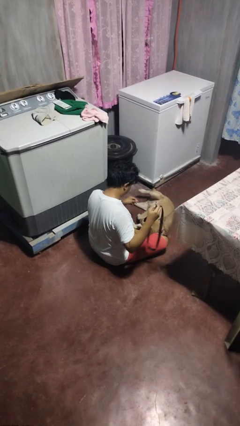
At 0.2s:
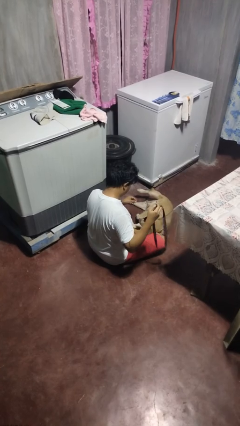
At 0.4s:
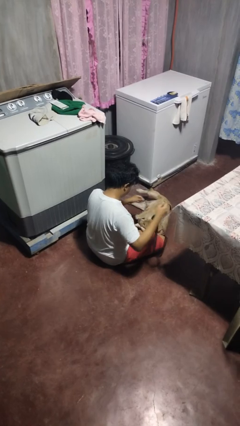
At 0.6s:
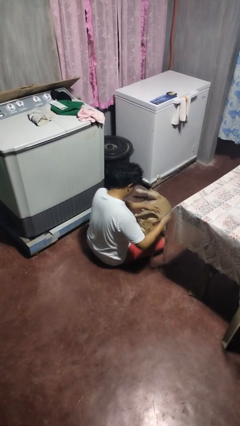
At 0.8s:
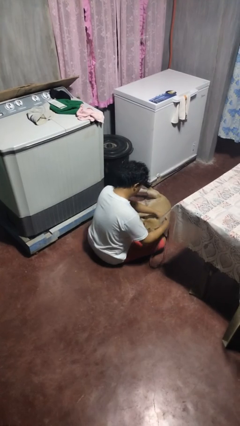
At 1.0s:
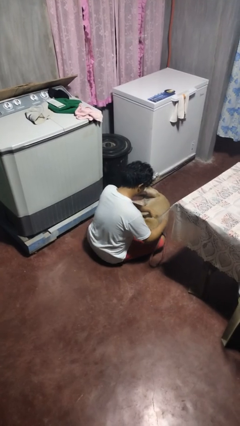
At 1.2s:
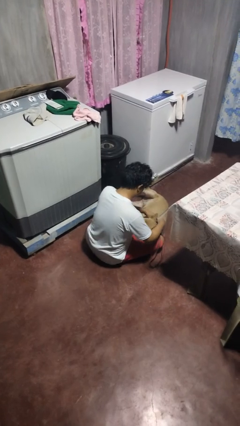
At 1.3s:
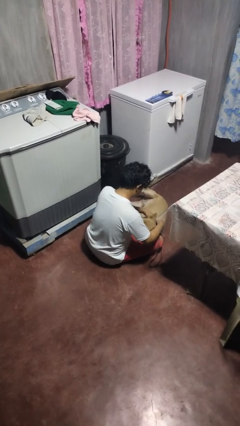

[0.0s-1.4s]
person attaches leash to dog

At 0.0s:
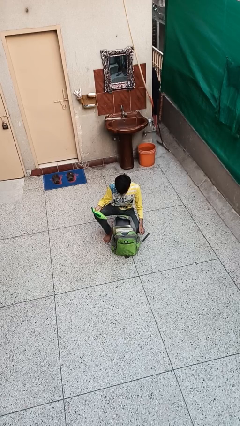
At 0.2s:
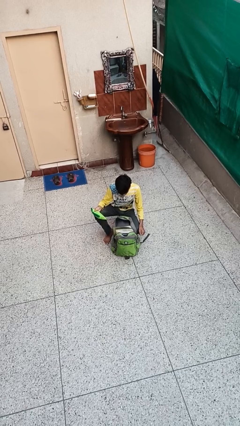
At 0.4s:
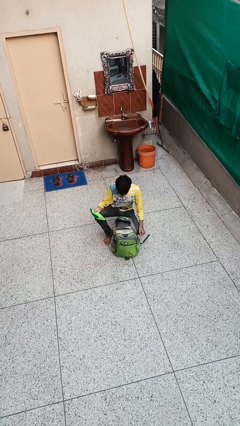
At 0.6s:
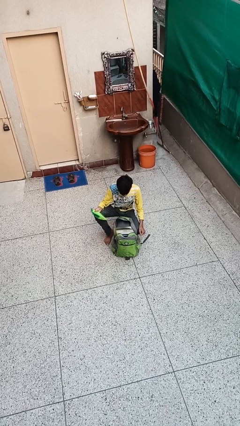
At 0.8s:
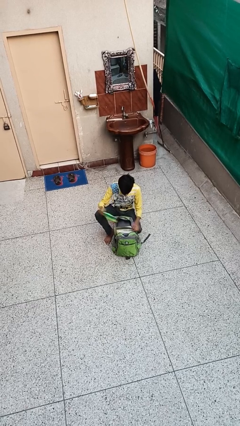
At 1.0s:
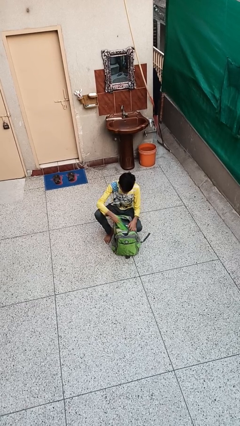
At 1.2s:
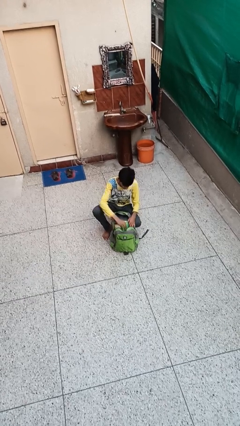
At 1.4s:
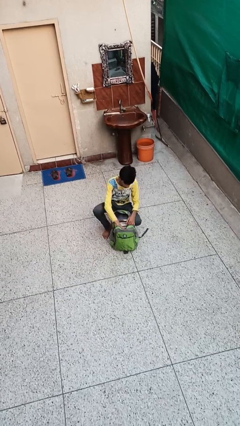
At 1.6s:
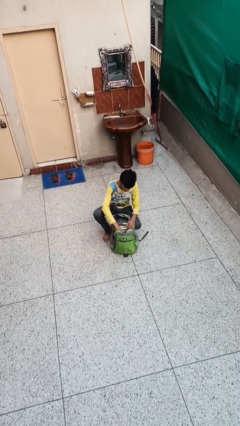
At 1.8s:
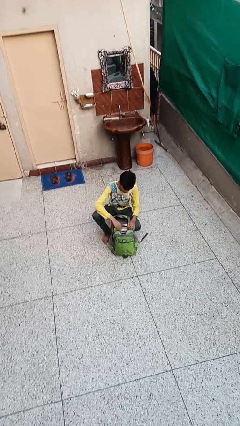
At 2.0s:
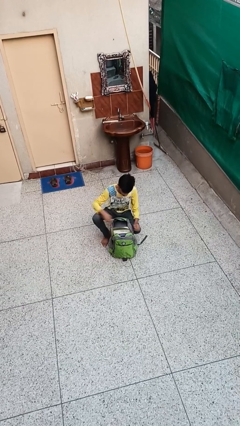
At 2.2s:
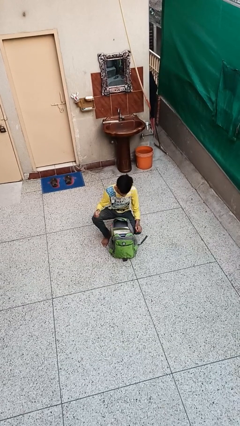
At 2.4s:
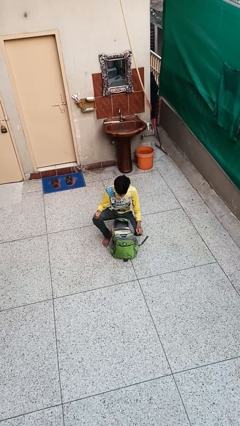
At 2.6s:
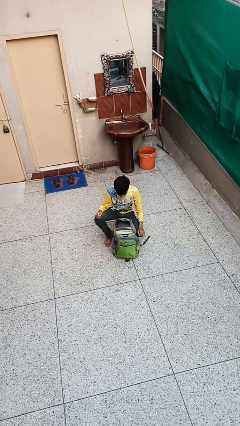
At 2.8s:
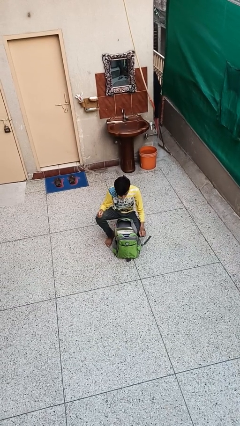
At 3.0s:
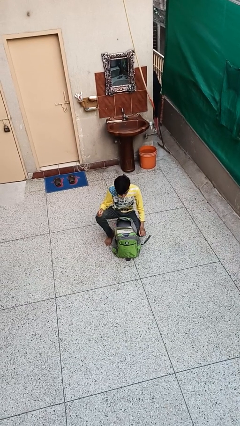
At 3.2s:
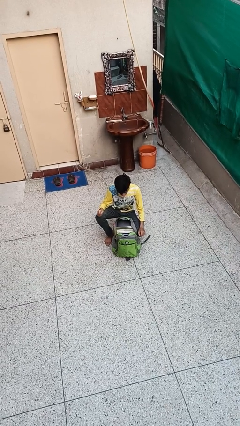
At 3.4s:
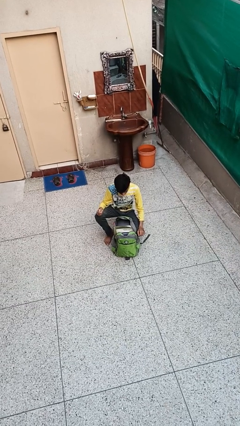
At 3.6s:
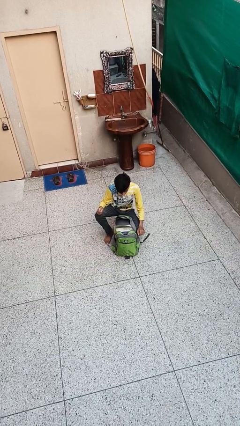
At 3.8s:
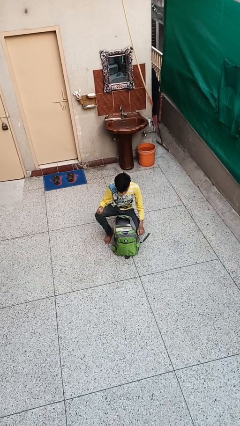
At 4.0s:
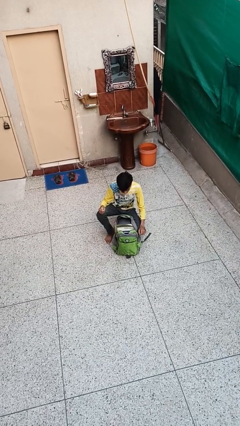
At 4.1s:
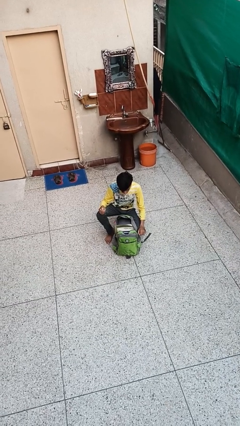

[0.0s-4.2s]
person puts object into backpack

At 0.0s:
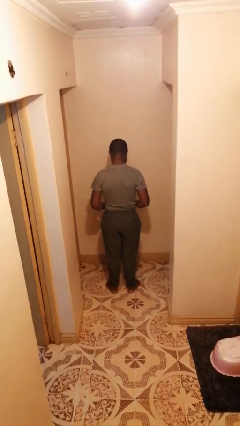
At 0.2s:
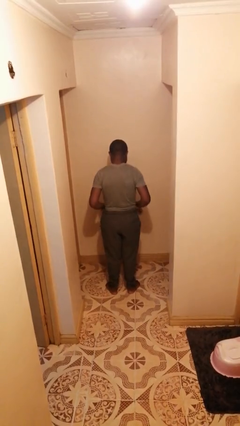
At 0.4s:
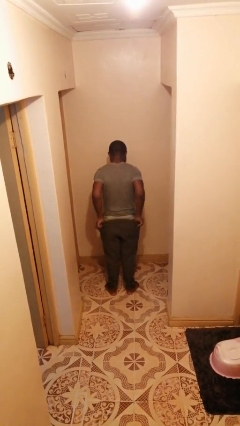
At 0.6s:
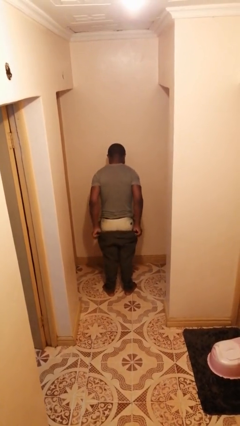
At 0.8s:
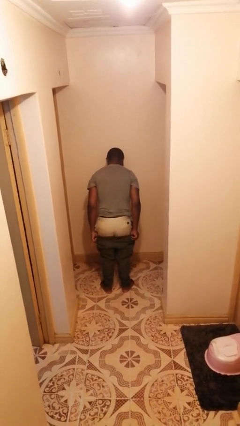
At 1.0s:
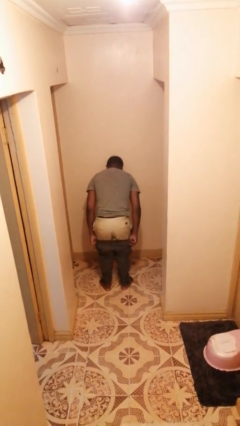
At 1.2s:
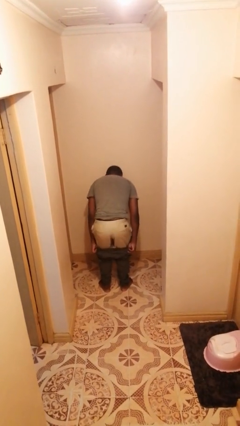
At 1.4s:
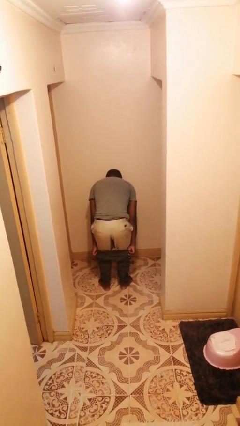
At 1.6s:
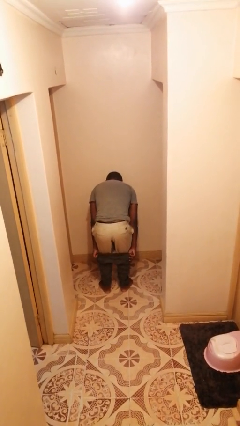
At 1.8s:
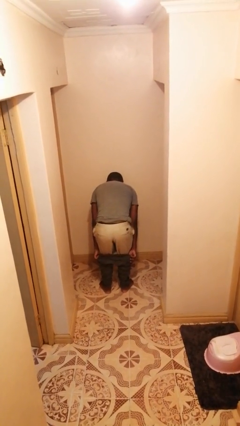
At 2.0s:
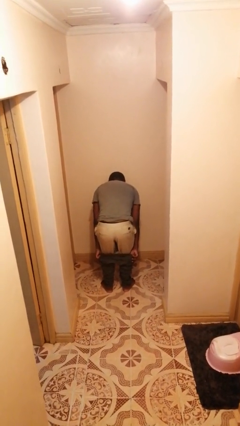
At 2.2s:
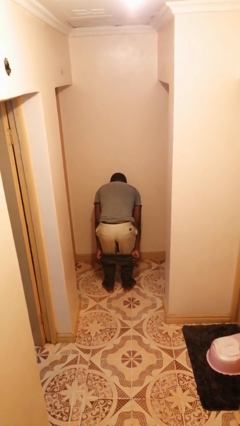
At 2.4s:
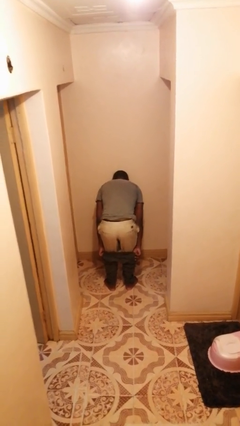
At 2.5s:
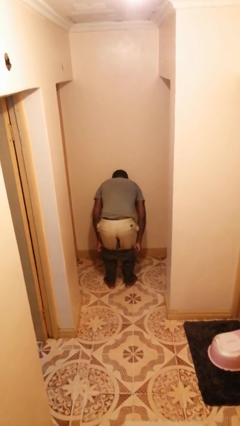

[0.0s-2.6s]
person takes off pants

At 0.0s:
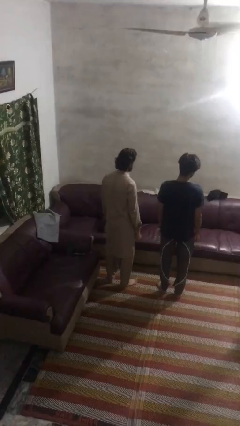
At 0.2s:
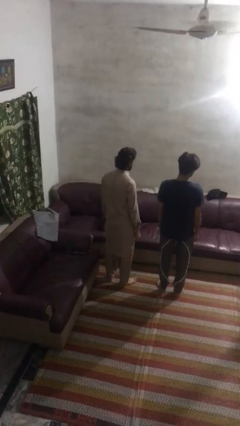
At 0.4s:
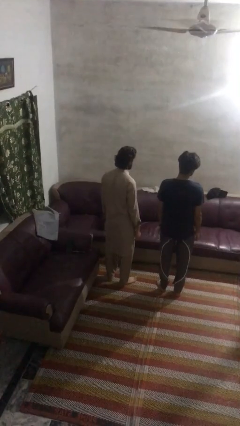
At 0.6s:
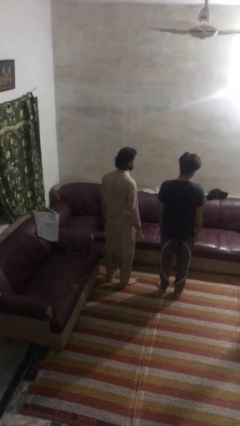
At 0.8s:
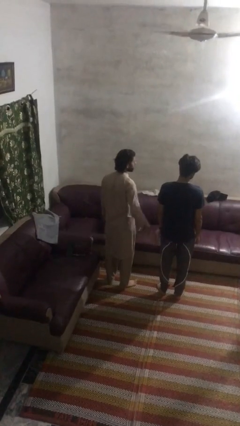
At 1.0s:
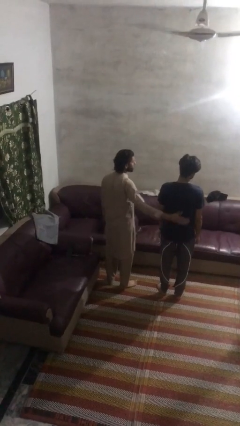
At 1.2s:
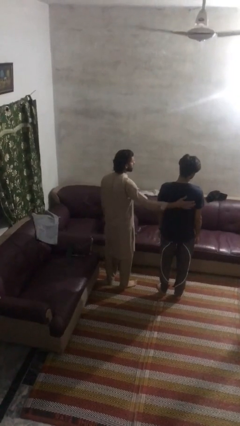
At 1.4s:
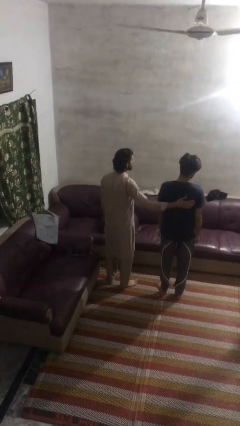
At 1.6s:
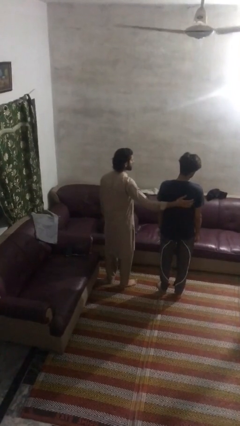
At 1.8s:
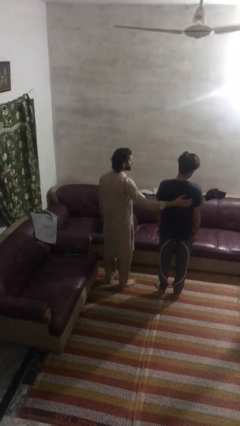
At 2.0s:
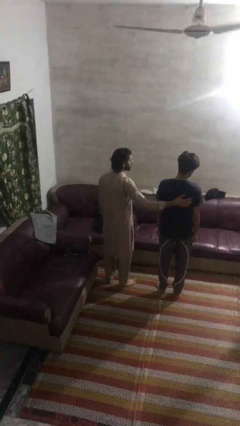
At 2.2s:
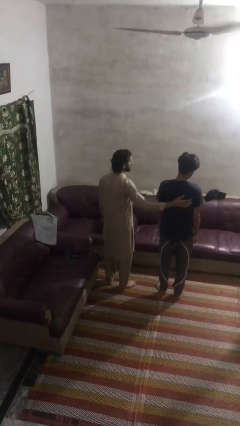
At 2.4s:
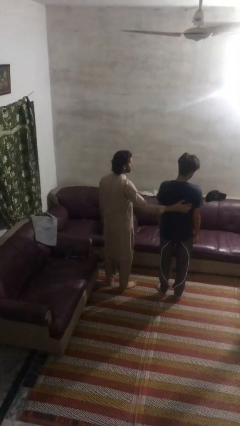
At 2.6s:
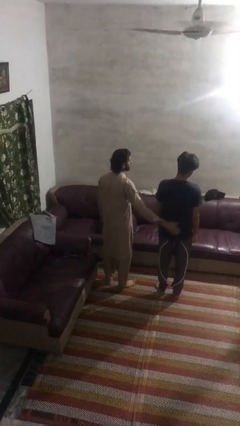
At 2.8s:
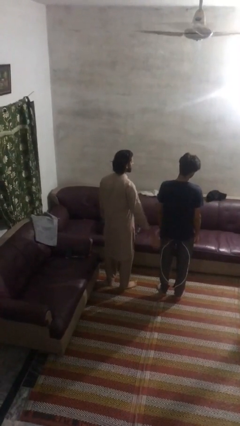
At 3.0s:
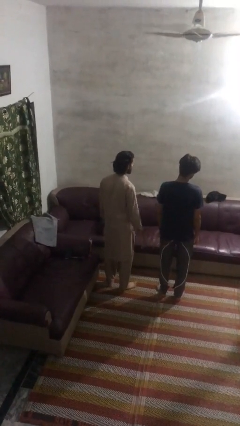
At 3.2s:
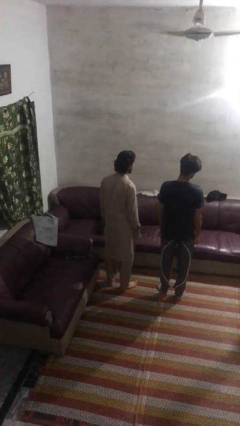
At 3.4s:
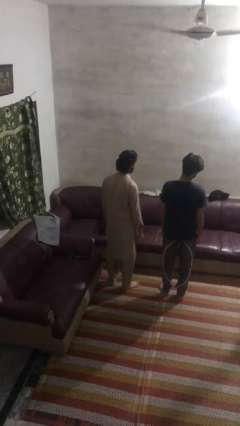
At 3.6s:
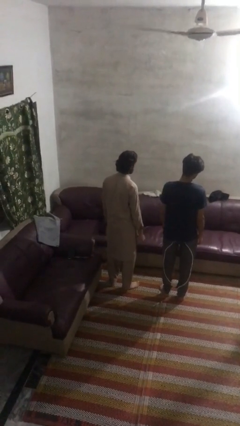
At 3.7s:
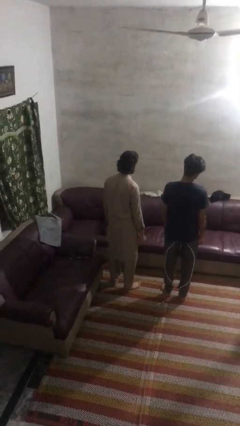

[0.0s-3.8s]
person touches back of person

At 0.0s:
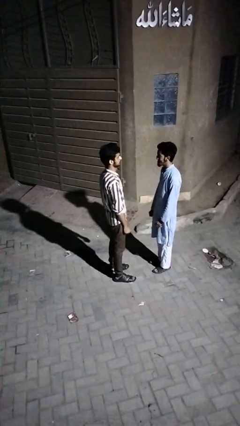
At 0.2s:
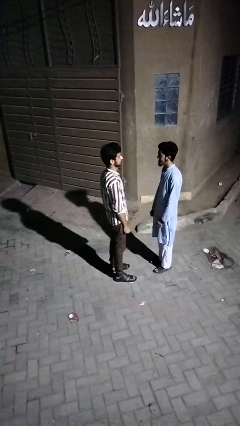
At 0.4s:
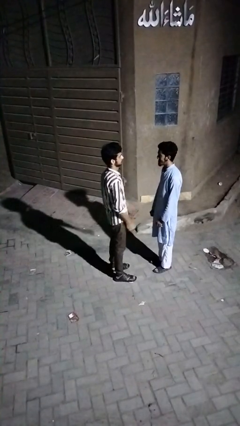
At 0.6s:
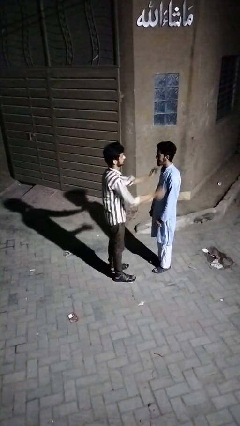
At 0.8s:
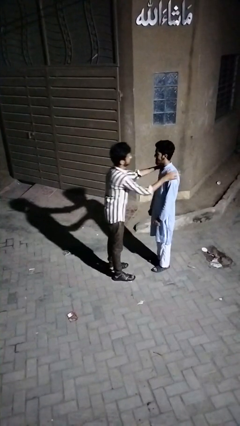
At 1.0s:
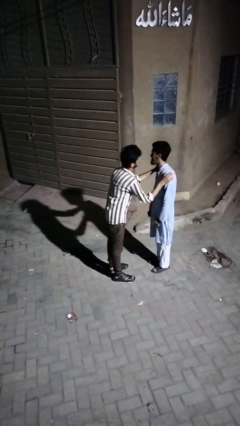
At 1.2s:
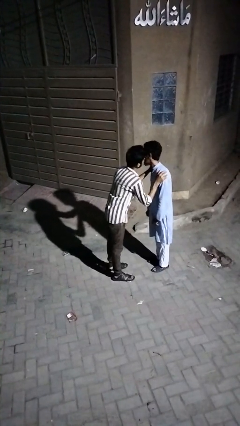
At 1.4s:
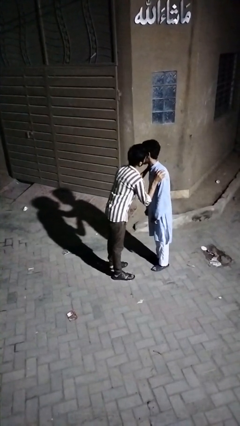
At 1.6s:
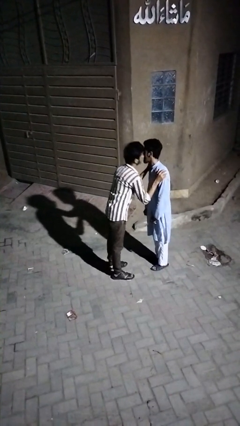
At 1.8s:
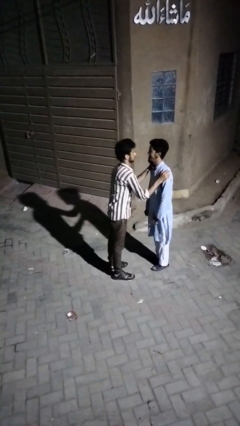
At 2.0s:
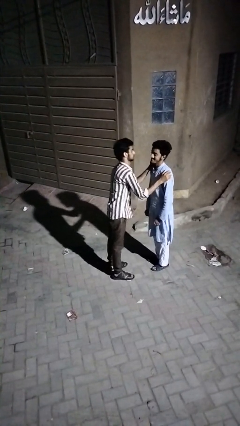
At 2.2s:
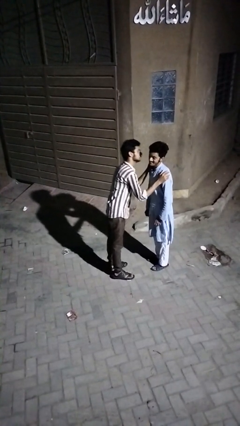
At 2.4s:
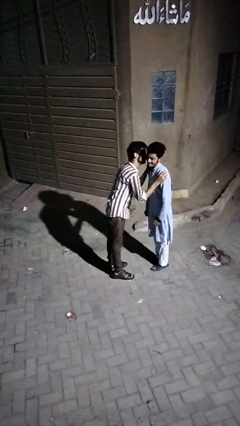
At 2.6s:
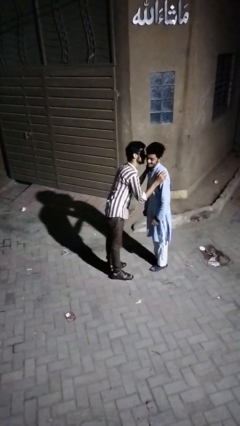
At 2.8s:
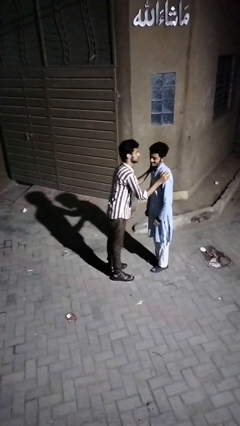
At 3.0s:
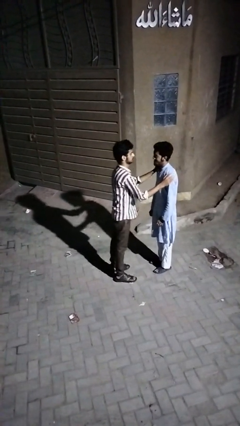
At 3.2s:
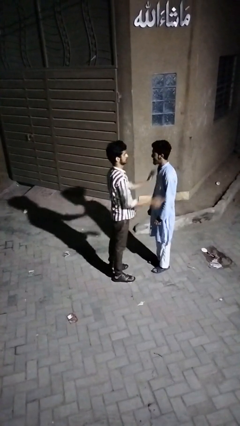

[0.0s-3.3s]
person kisses cheek of person

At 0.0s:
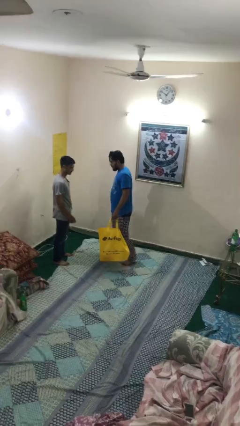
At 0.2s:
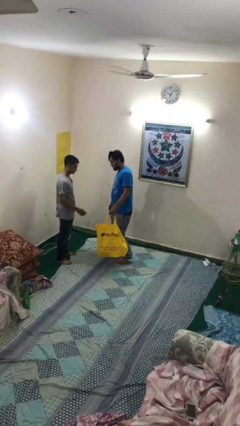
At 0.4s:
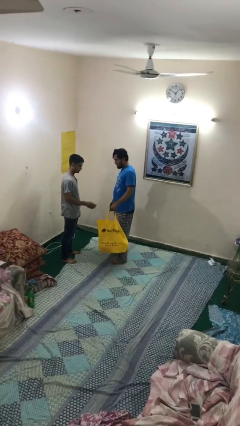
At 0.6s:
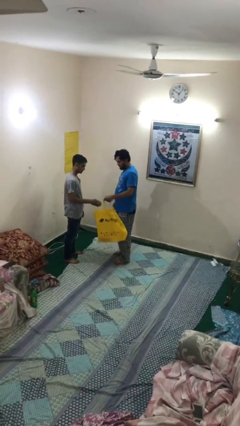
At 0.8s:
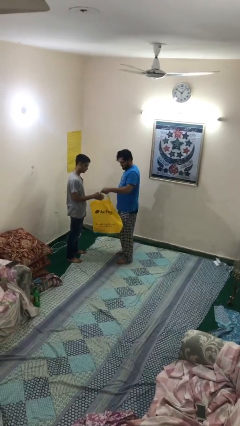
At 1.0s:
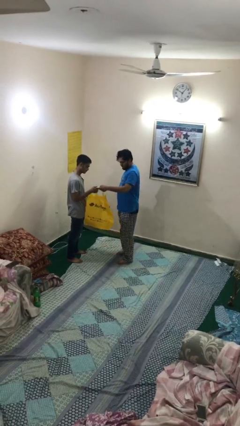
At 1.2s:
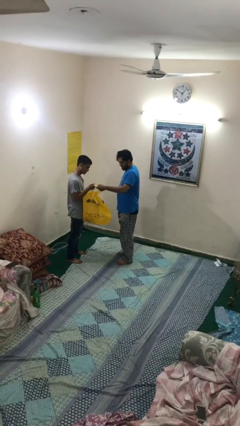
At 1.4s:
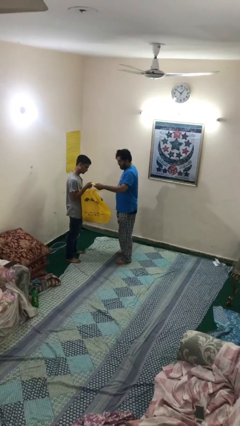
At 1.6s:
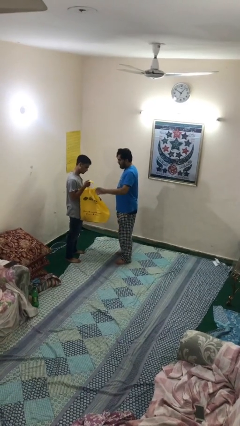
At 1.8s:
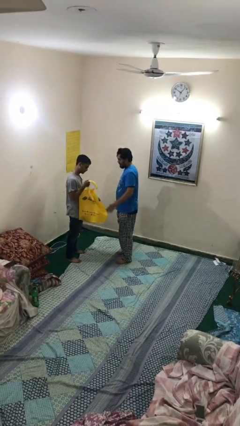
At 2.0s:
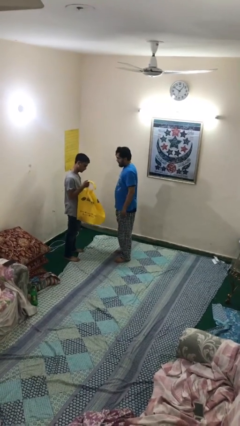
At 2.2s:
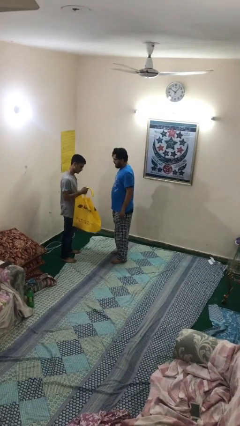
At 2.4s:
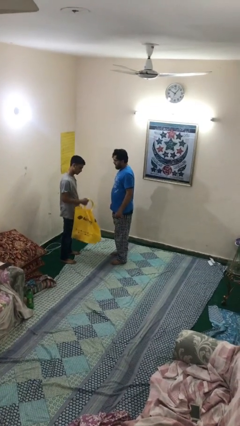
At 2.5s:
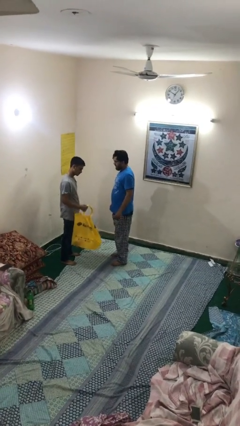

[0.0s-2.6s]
person transfers object to person
